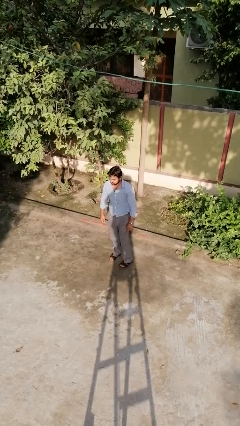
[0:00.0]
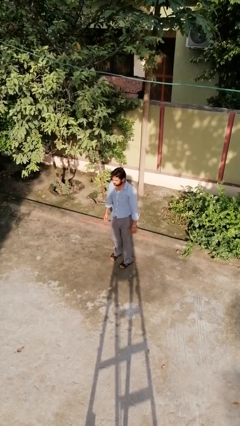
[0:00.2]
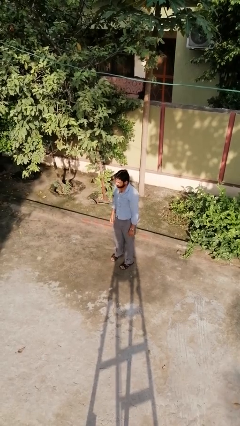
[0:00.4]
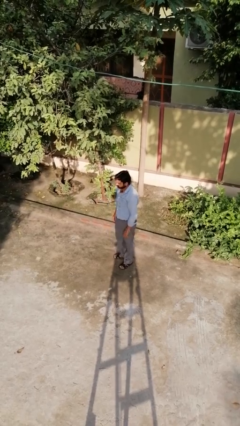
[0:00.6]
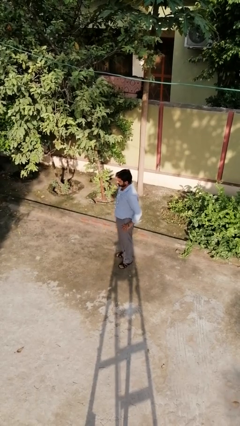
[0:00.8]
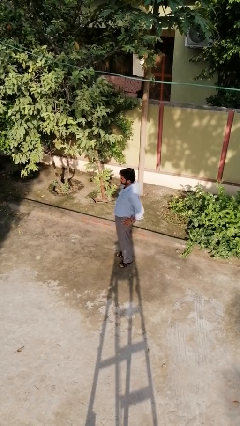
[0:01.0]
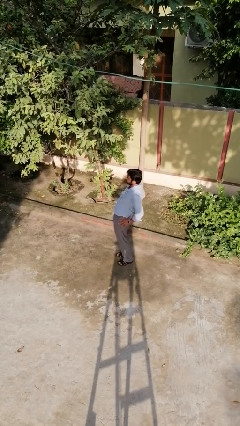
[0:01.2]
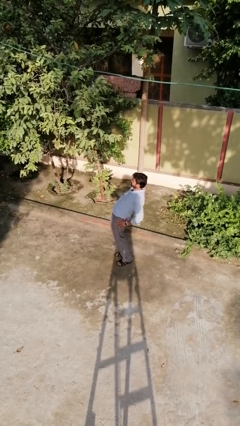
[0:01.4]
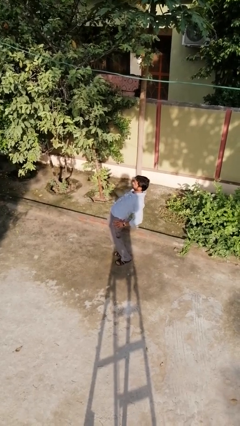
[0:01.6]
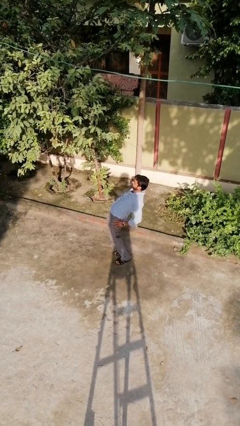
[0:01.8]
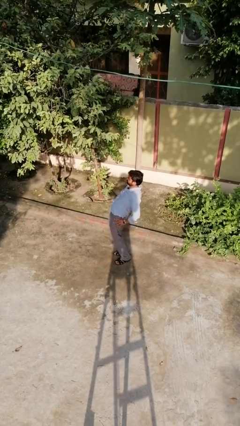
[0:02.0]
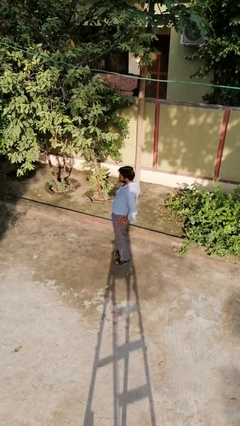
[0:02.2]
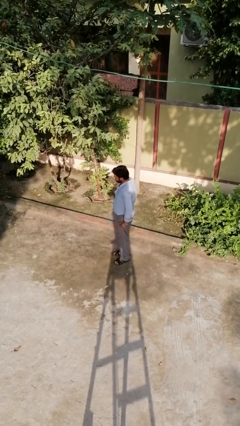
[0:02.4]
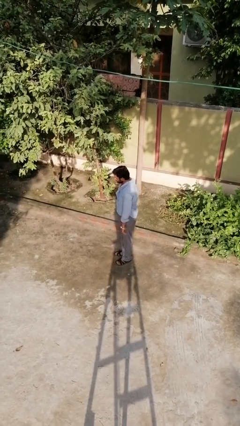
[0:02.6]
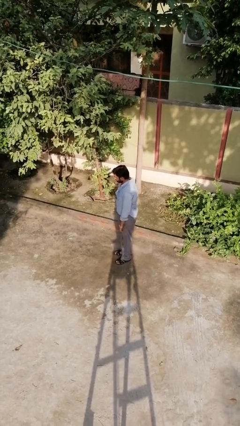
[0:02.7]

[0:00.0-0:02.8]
person stretches back

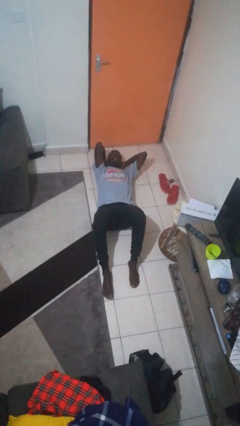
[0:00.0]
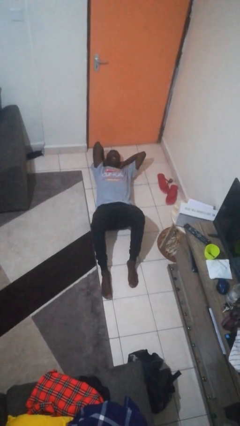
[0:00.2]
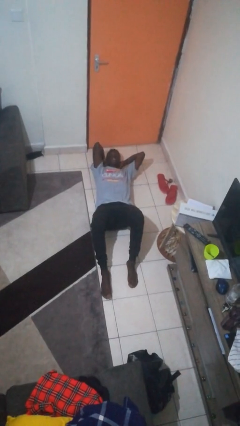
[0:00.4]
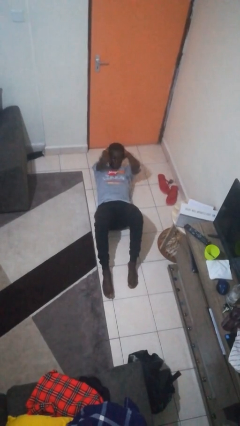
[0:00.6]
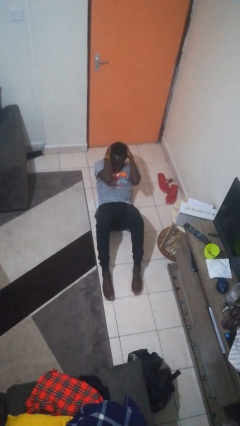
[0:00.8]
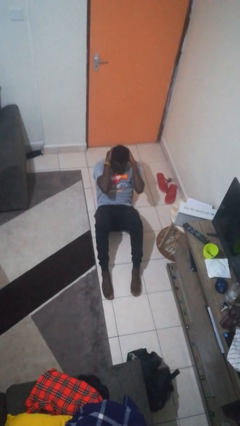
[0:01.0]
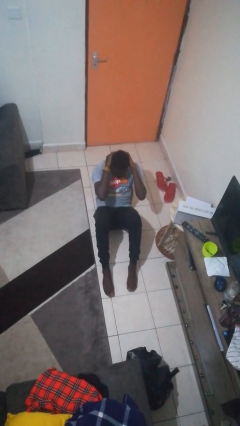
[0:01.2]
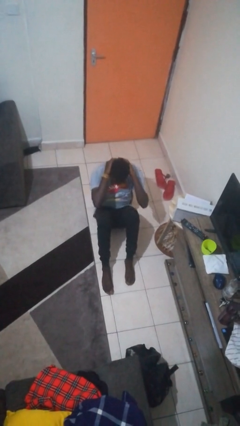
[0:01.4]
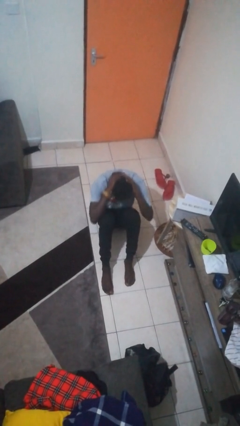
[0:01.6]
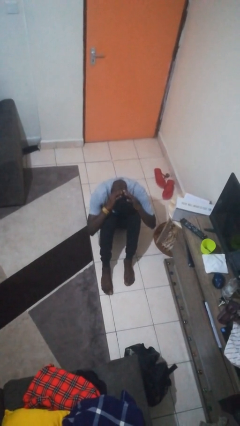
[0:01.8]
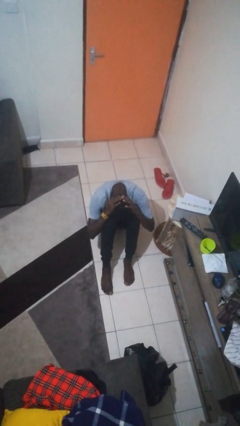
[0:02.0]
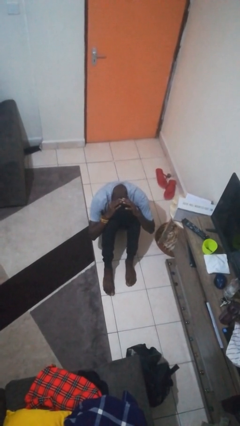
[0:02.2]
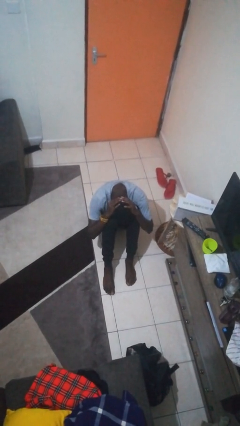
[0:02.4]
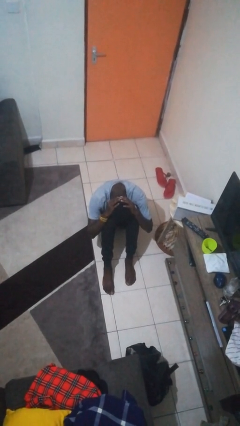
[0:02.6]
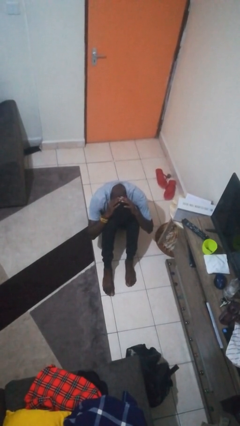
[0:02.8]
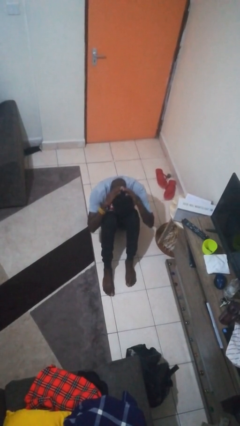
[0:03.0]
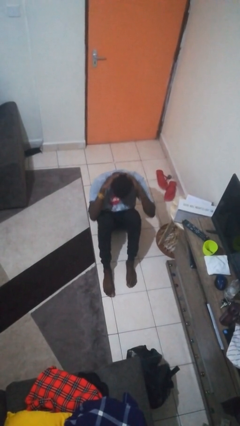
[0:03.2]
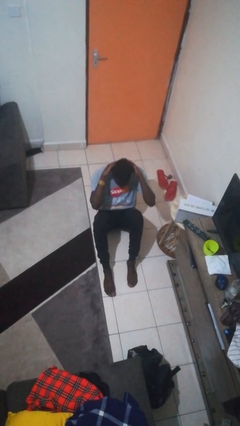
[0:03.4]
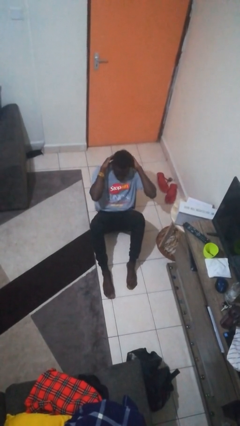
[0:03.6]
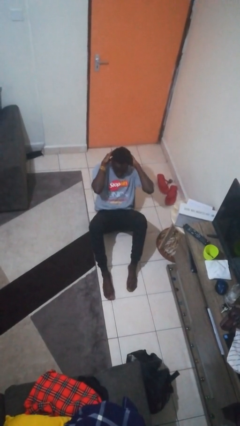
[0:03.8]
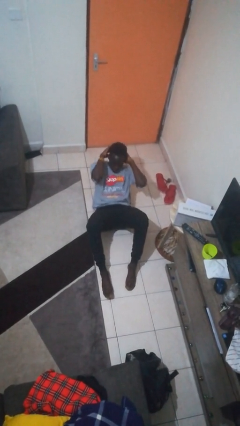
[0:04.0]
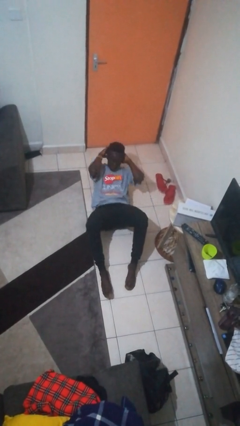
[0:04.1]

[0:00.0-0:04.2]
person exercises with situp

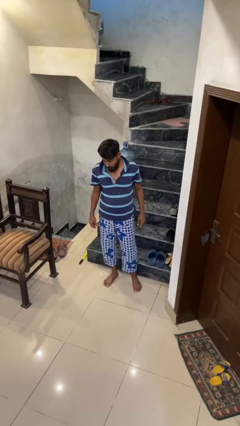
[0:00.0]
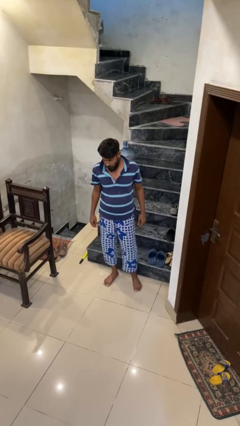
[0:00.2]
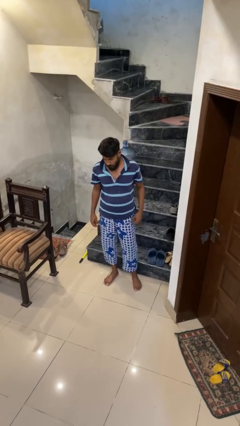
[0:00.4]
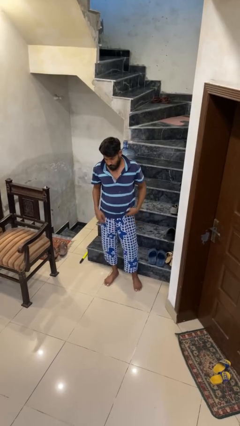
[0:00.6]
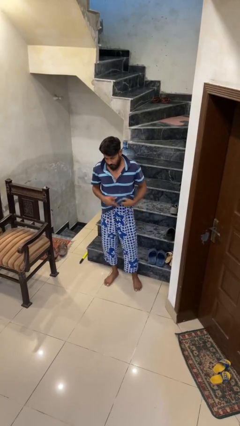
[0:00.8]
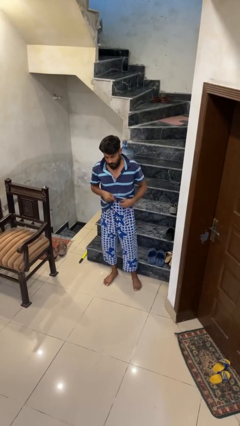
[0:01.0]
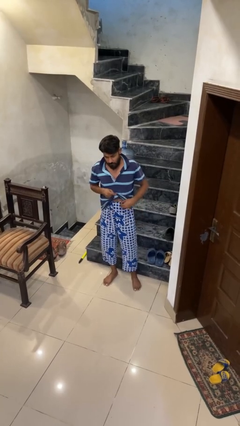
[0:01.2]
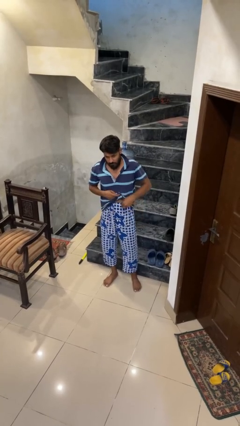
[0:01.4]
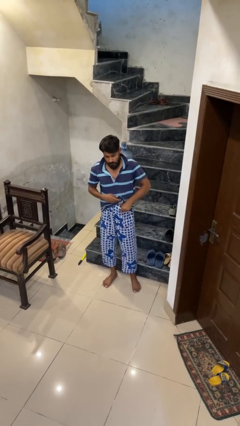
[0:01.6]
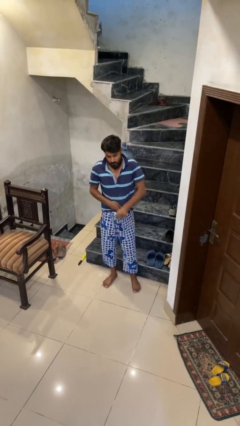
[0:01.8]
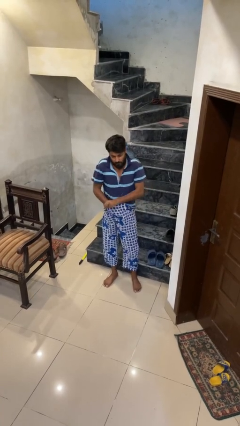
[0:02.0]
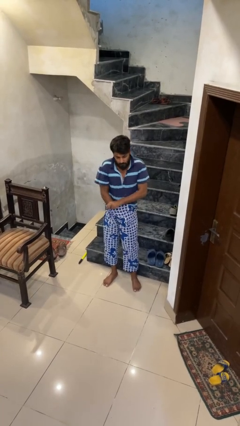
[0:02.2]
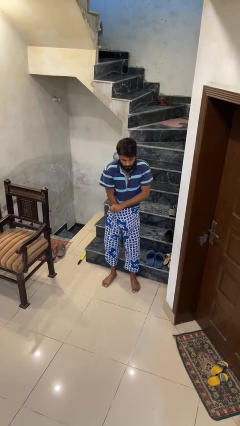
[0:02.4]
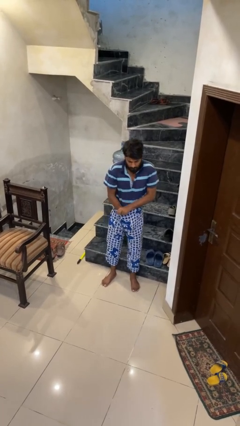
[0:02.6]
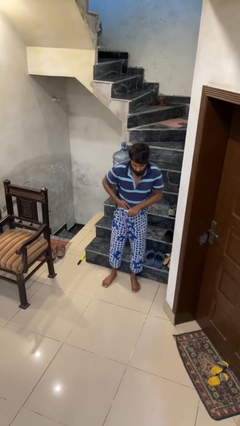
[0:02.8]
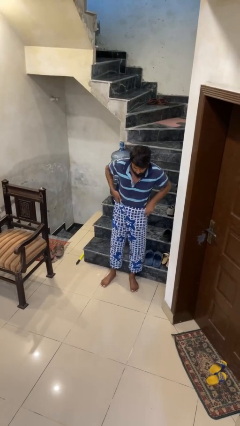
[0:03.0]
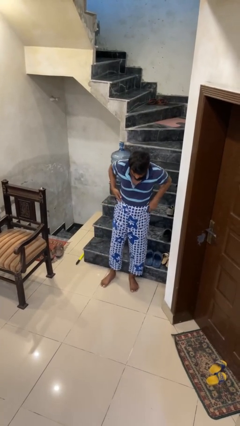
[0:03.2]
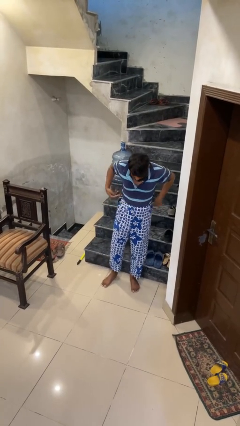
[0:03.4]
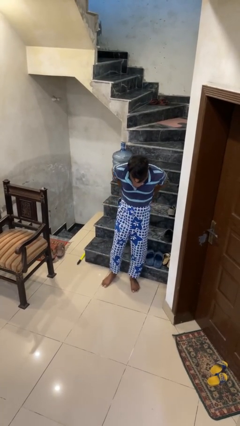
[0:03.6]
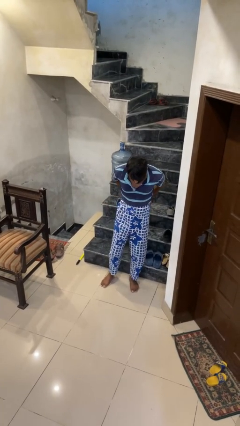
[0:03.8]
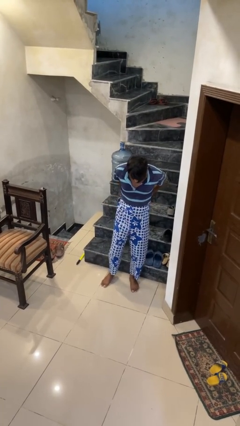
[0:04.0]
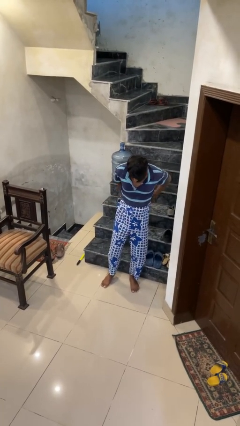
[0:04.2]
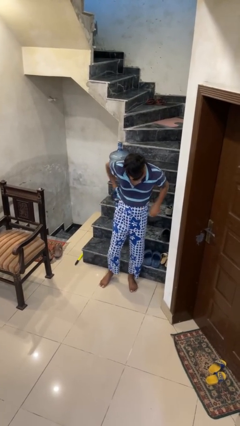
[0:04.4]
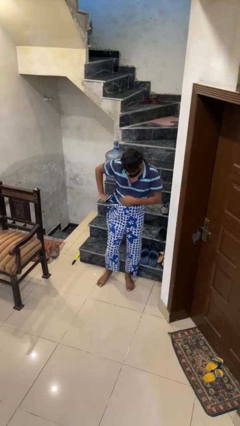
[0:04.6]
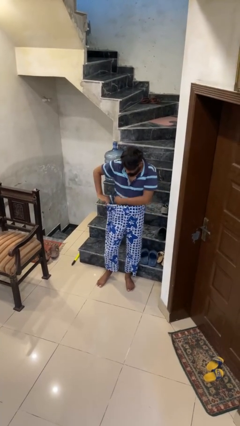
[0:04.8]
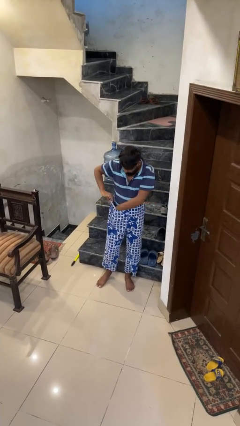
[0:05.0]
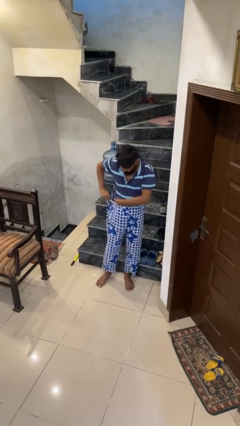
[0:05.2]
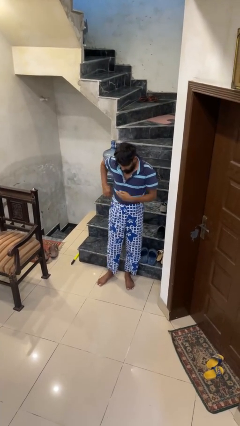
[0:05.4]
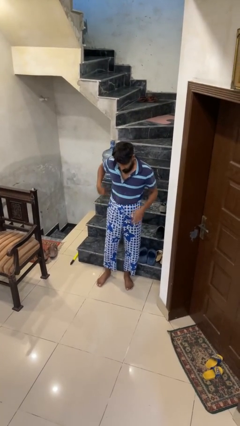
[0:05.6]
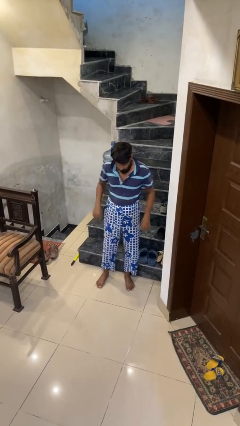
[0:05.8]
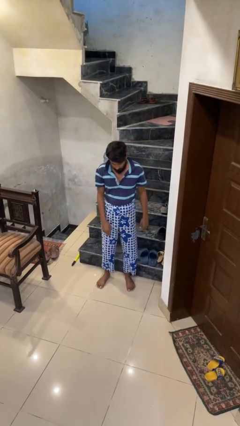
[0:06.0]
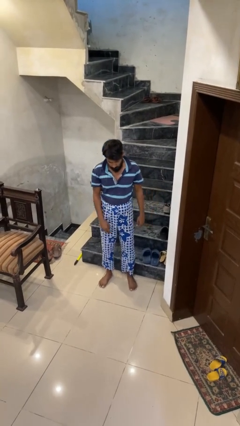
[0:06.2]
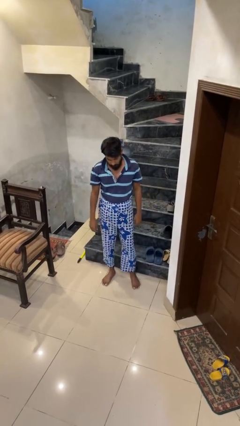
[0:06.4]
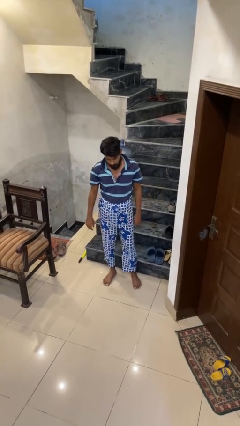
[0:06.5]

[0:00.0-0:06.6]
person tucks in shirt

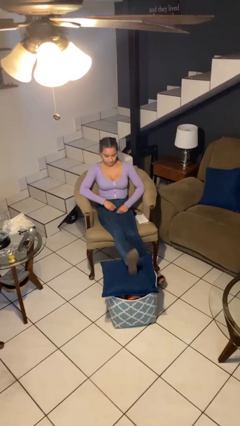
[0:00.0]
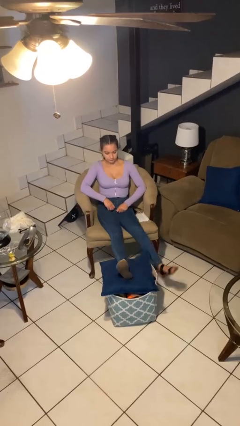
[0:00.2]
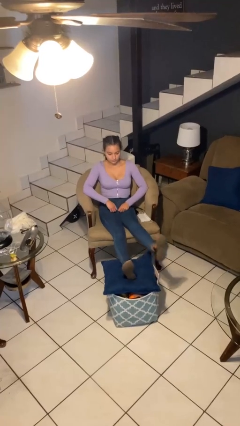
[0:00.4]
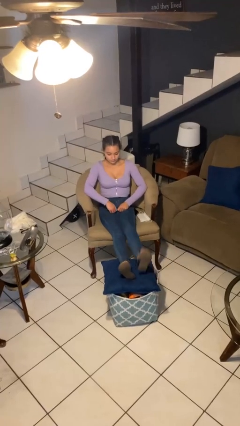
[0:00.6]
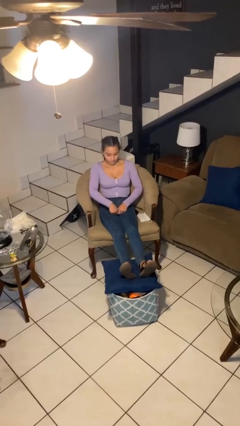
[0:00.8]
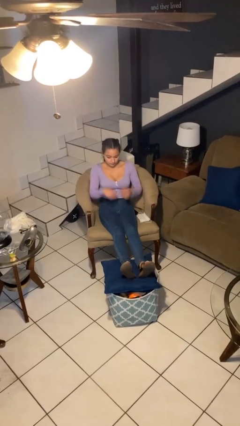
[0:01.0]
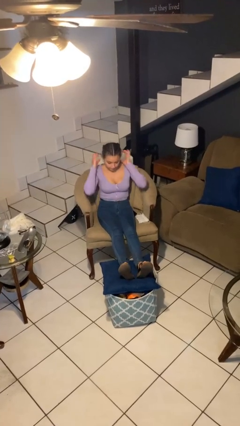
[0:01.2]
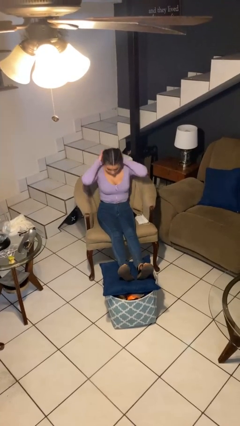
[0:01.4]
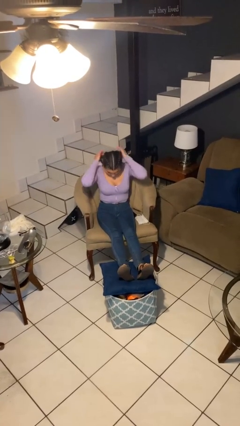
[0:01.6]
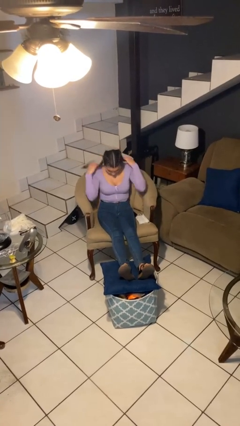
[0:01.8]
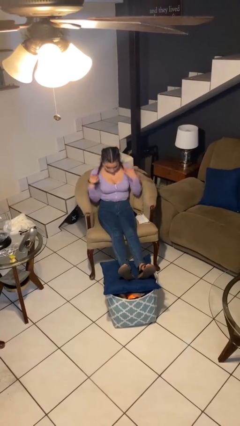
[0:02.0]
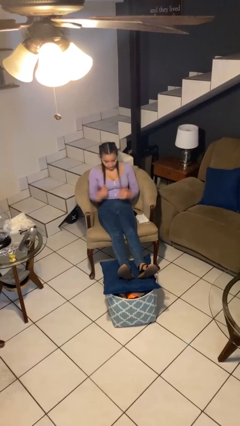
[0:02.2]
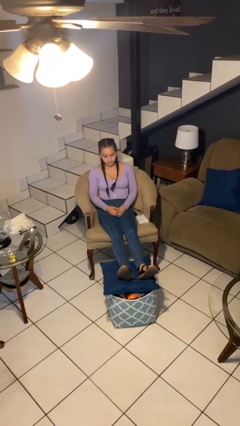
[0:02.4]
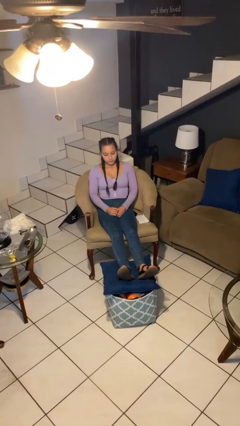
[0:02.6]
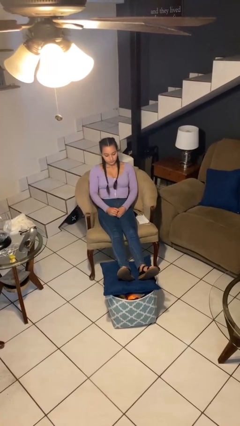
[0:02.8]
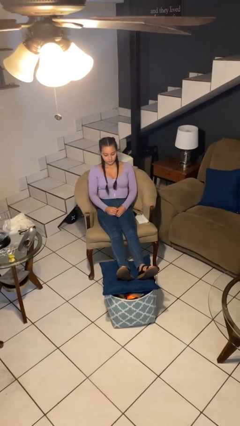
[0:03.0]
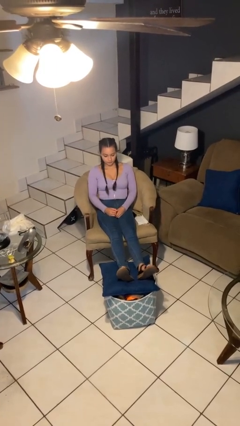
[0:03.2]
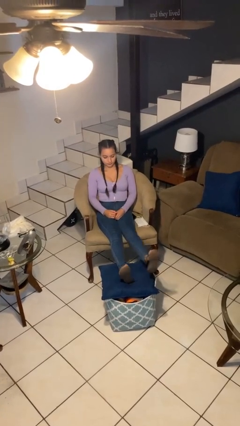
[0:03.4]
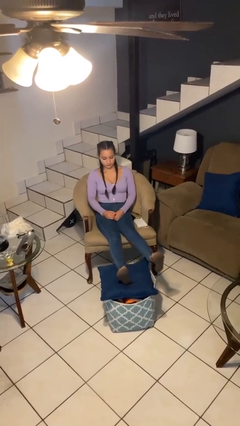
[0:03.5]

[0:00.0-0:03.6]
person puts feet up

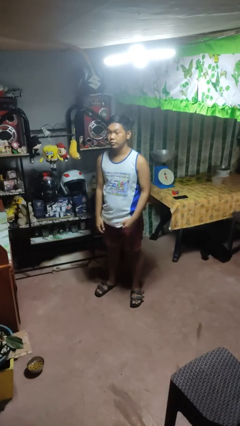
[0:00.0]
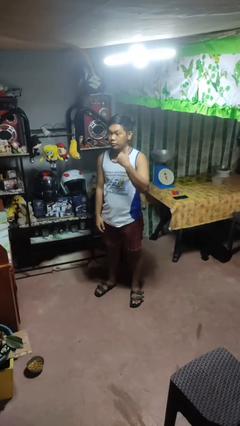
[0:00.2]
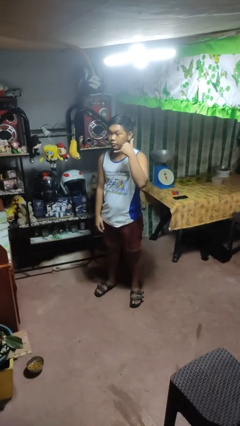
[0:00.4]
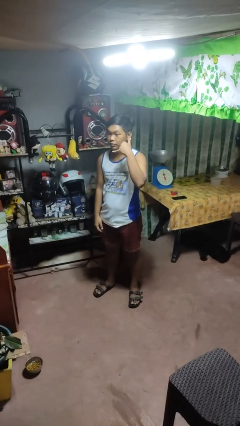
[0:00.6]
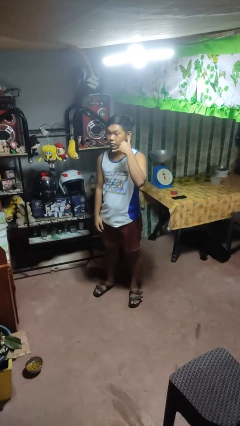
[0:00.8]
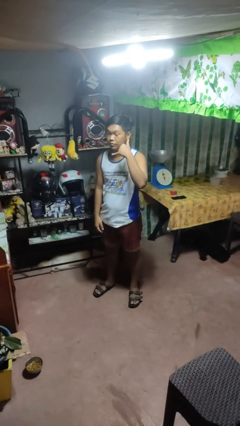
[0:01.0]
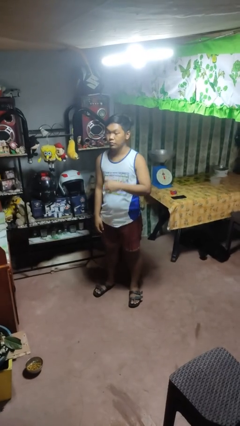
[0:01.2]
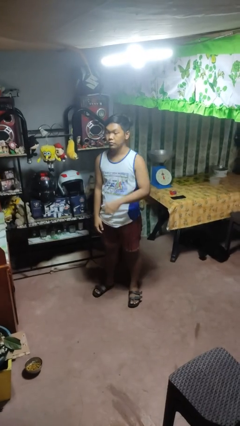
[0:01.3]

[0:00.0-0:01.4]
person gestures call me
